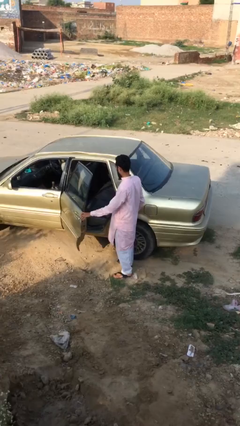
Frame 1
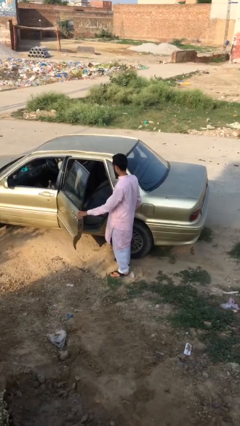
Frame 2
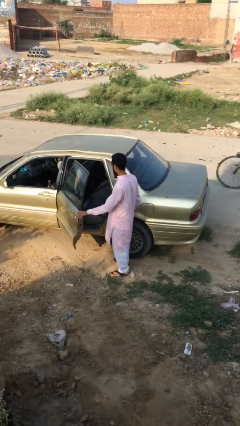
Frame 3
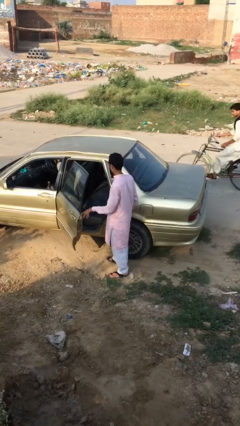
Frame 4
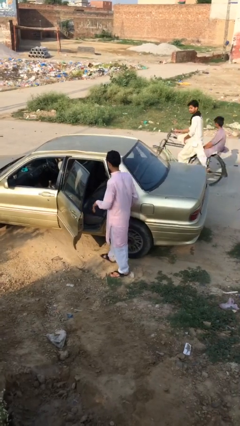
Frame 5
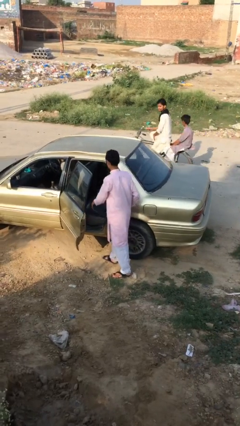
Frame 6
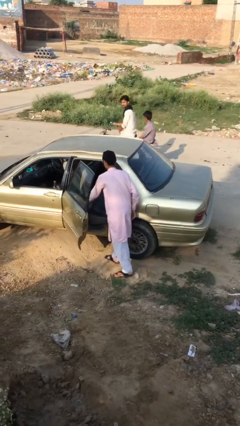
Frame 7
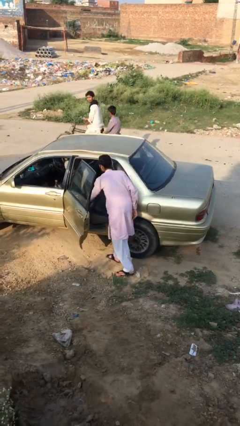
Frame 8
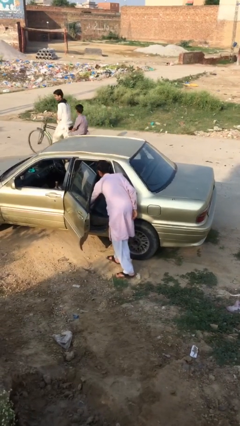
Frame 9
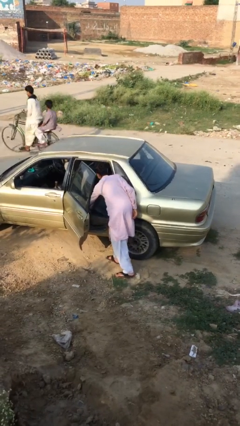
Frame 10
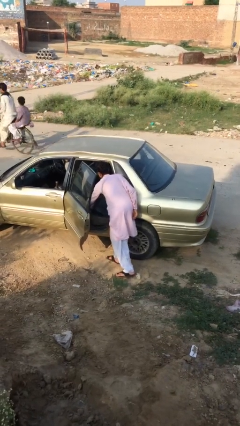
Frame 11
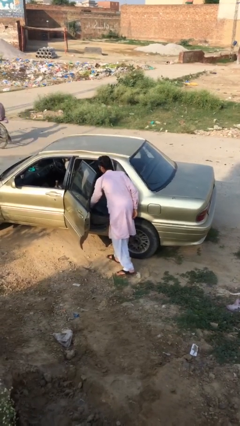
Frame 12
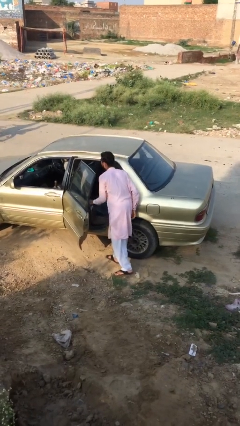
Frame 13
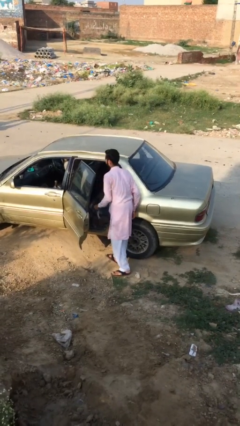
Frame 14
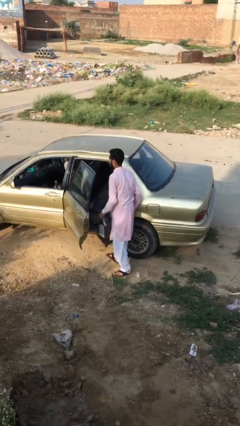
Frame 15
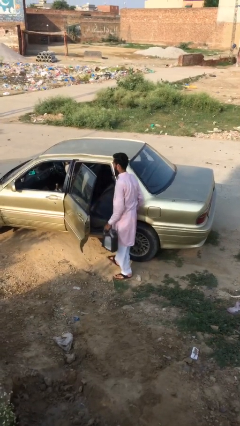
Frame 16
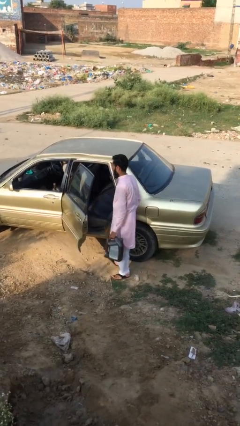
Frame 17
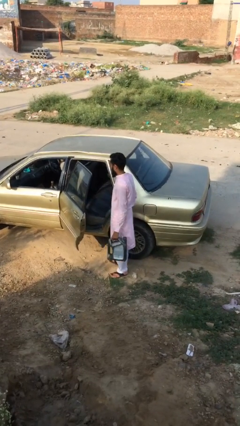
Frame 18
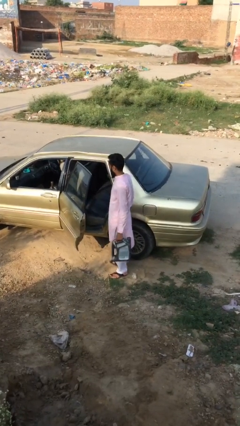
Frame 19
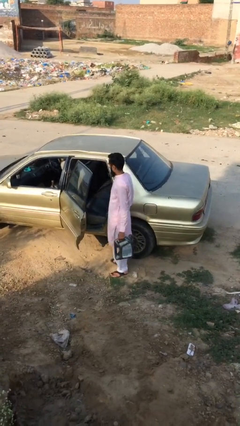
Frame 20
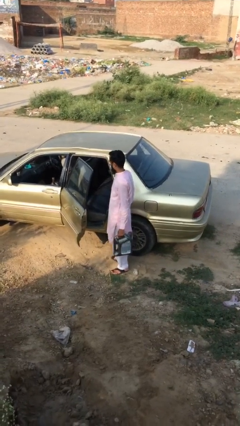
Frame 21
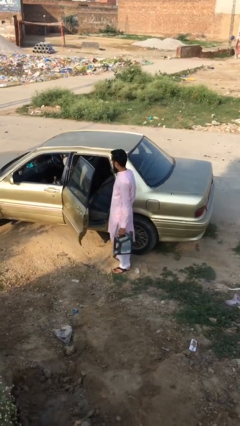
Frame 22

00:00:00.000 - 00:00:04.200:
person unloads car

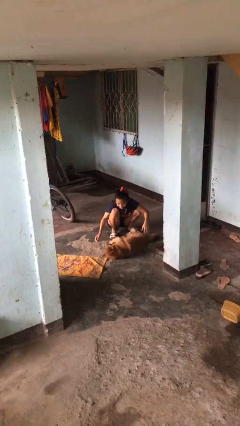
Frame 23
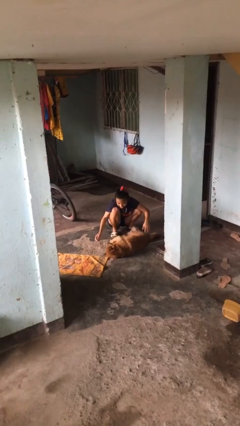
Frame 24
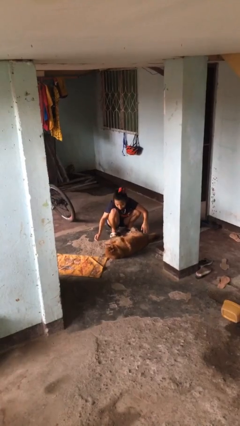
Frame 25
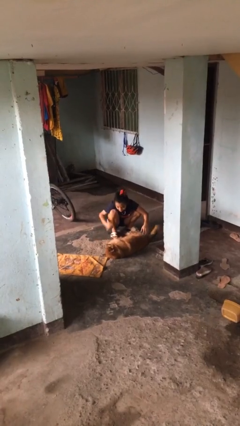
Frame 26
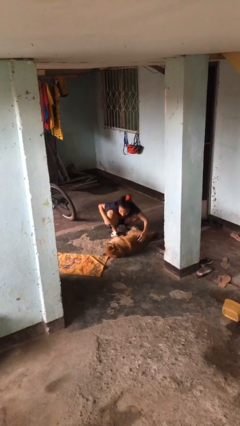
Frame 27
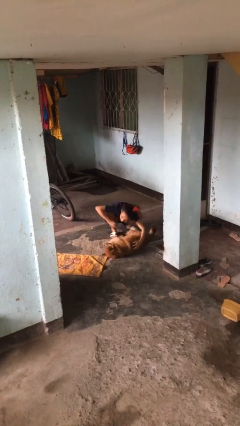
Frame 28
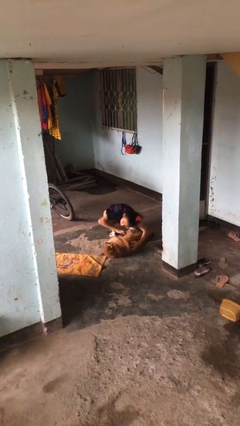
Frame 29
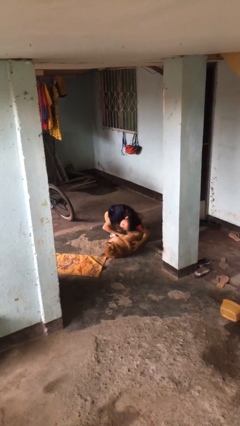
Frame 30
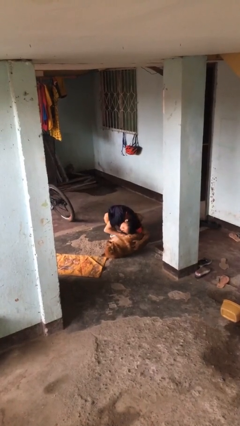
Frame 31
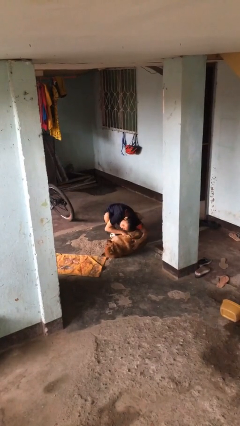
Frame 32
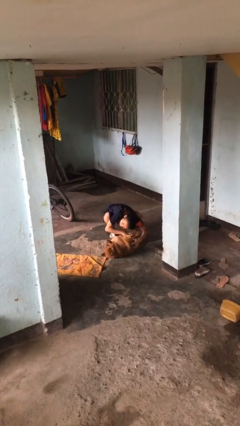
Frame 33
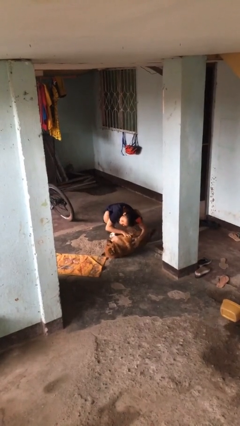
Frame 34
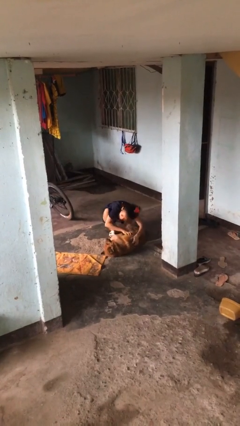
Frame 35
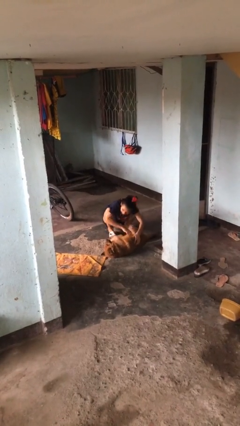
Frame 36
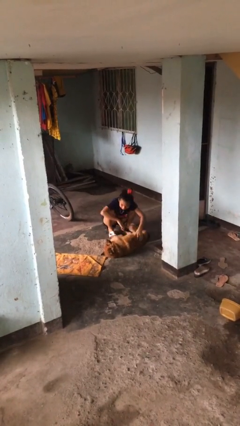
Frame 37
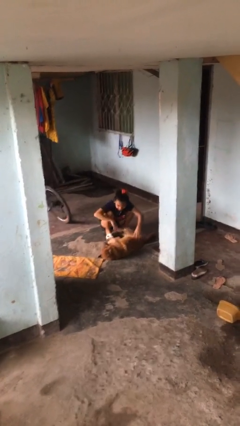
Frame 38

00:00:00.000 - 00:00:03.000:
person hugs dog

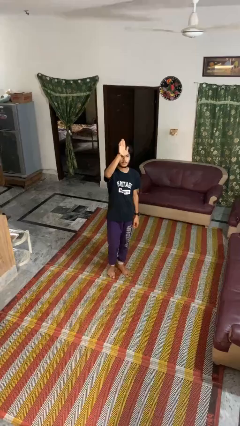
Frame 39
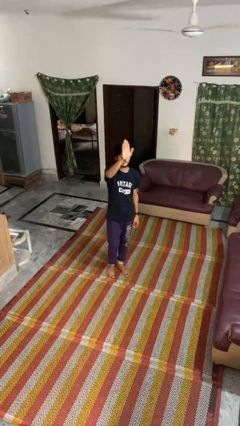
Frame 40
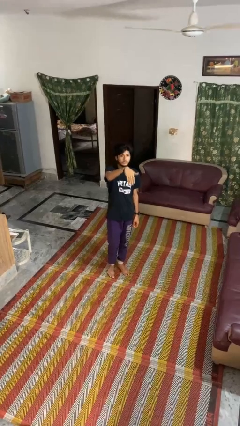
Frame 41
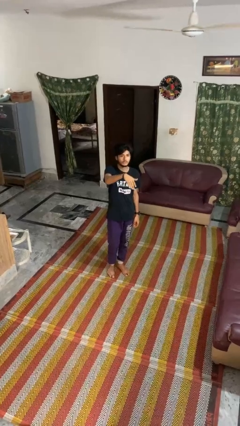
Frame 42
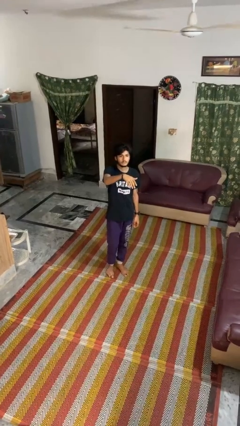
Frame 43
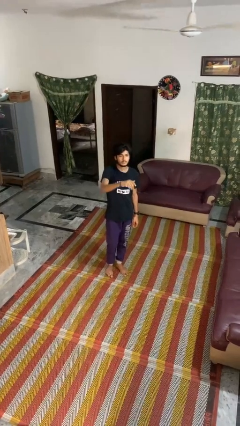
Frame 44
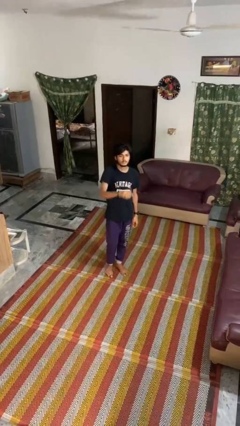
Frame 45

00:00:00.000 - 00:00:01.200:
person gestures swipe down

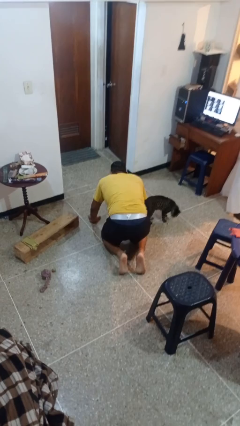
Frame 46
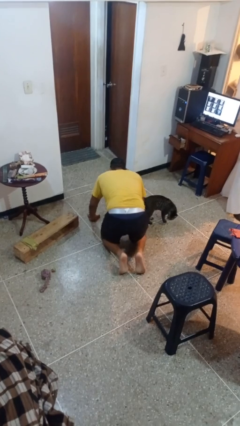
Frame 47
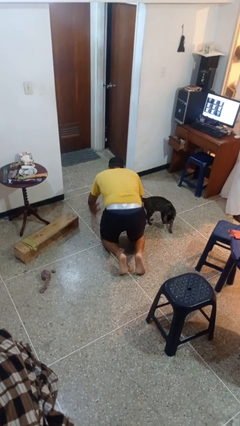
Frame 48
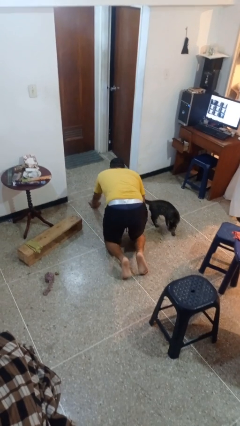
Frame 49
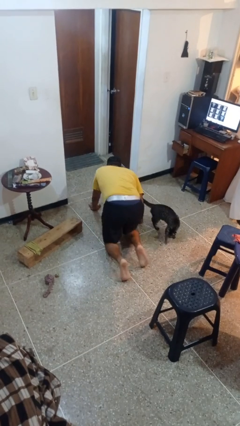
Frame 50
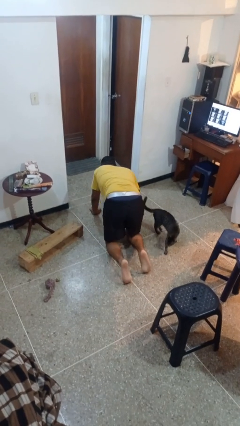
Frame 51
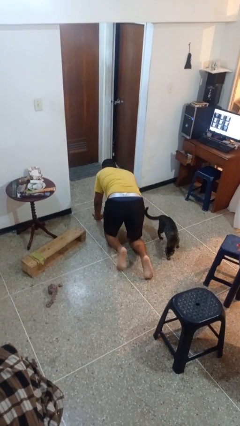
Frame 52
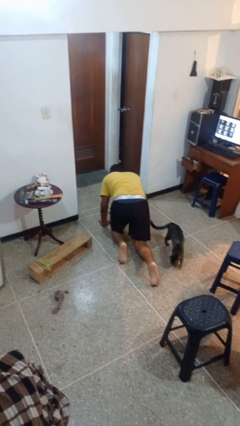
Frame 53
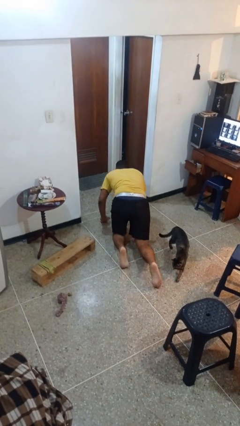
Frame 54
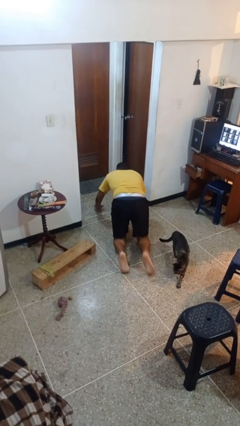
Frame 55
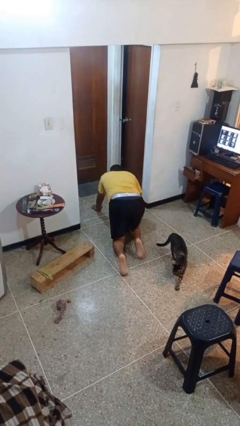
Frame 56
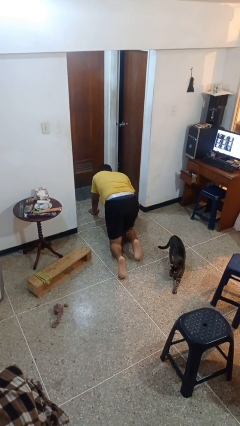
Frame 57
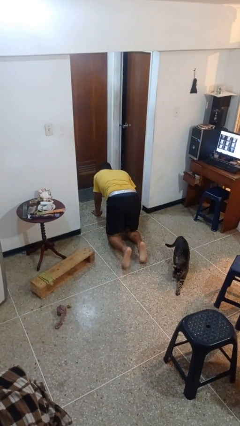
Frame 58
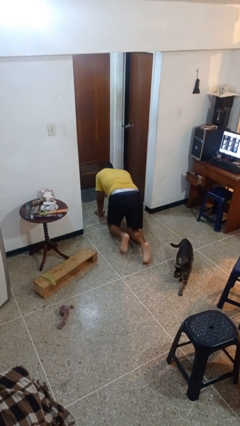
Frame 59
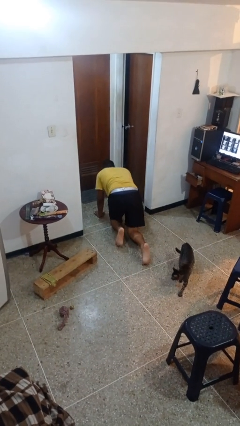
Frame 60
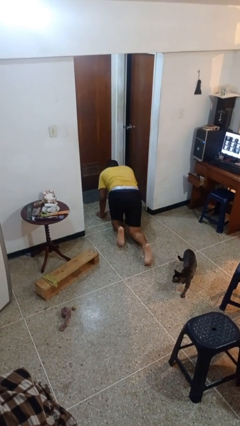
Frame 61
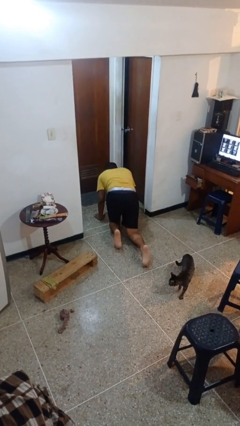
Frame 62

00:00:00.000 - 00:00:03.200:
person crawls

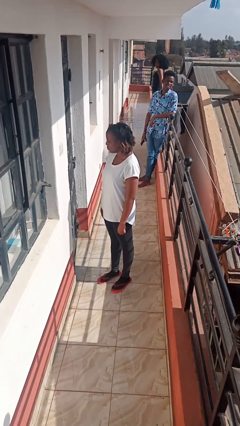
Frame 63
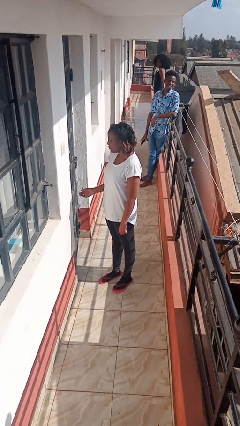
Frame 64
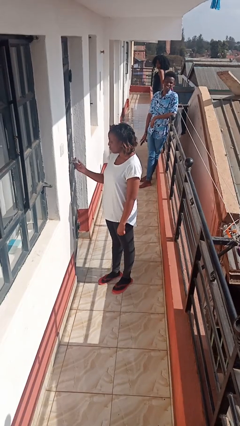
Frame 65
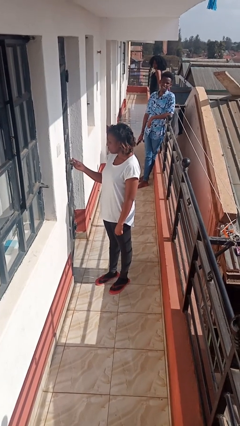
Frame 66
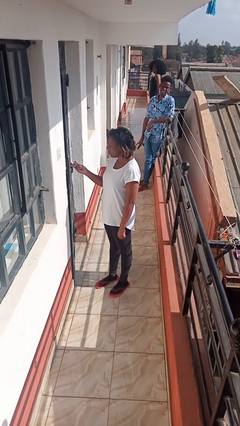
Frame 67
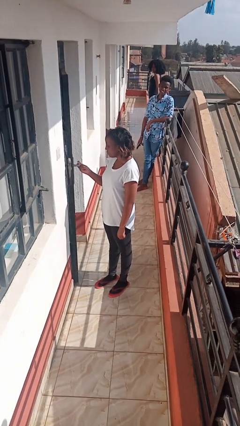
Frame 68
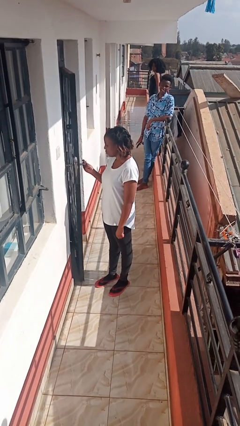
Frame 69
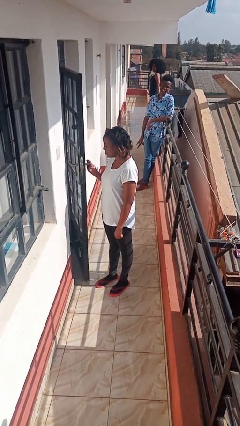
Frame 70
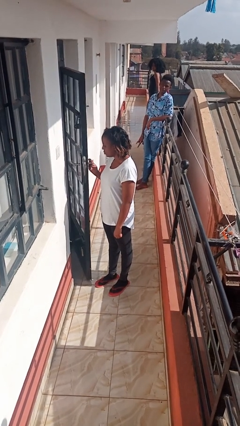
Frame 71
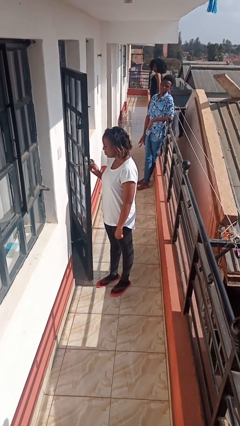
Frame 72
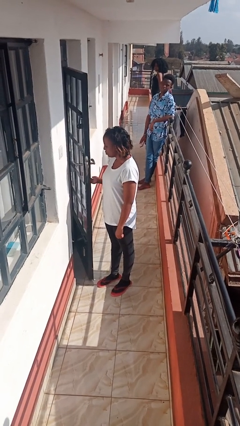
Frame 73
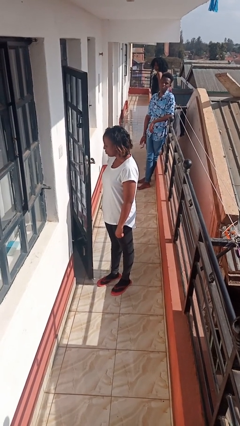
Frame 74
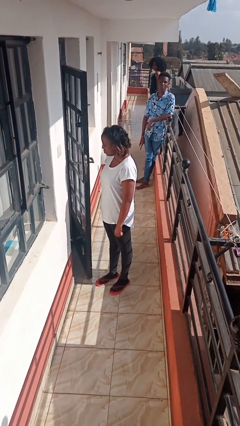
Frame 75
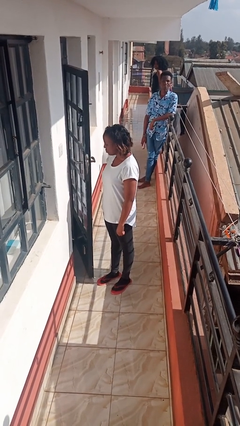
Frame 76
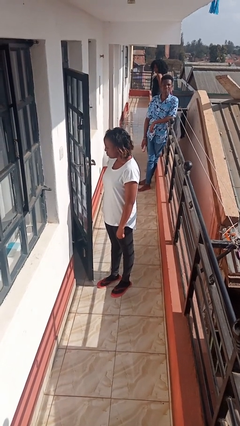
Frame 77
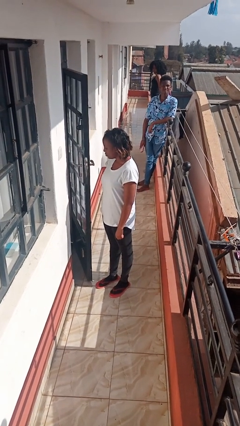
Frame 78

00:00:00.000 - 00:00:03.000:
person opens facility door

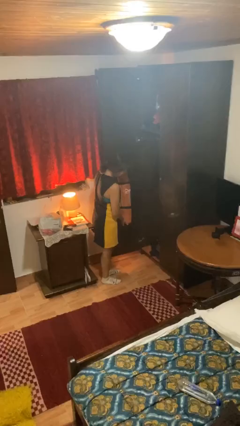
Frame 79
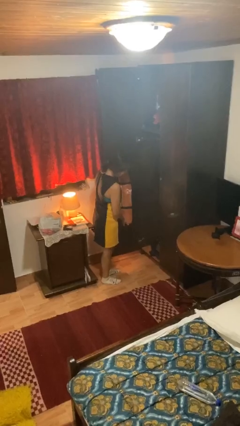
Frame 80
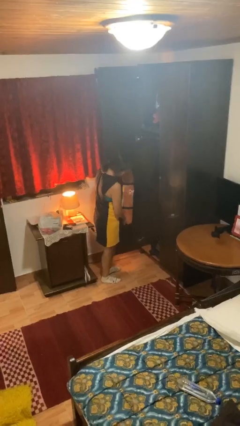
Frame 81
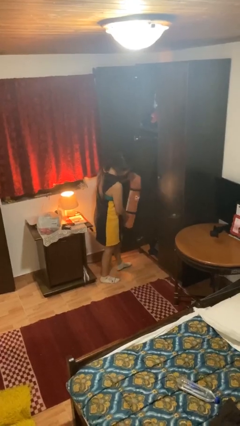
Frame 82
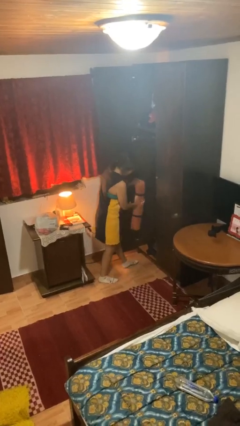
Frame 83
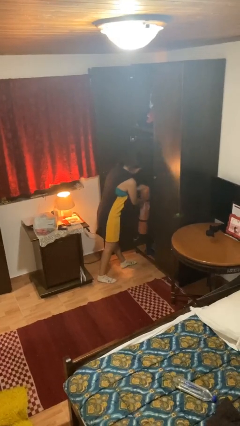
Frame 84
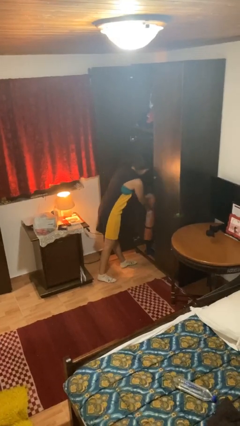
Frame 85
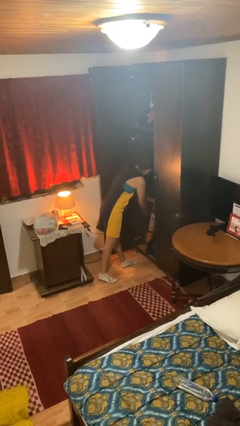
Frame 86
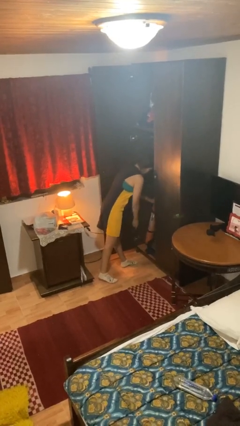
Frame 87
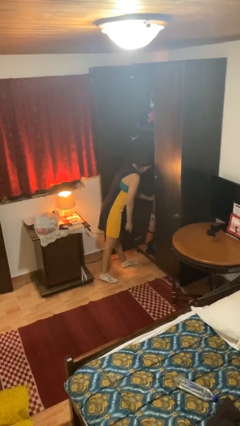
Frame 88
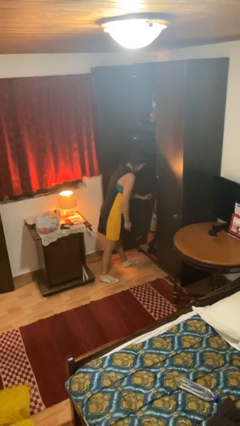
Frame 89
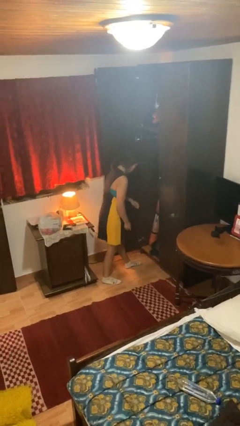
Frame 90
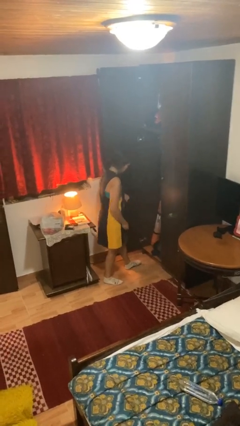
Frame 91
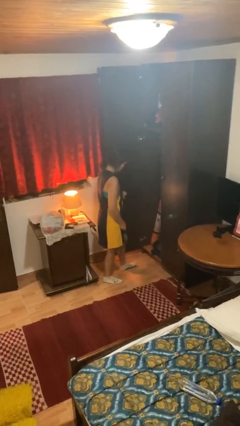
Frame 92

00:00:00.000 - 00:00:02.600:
person puts down object into cabinet
